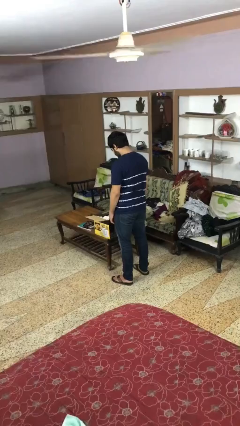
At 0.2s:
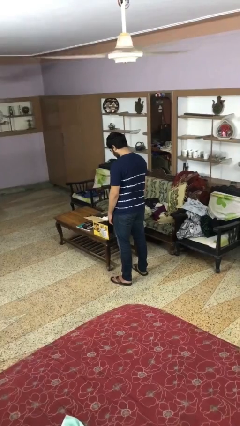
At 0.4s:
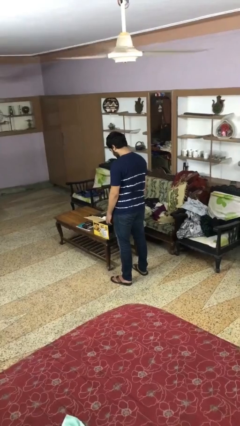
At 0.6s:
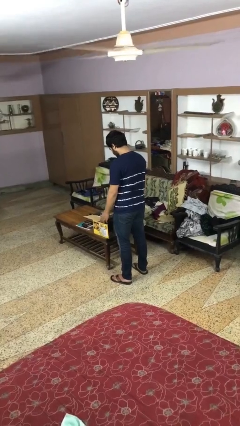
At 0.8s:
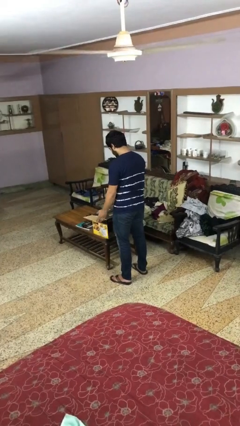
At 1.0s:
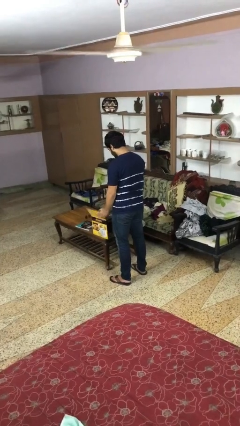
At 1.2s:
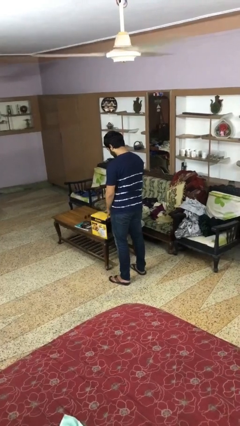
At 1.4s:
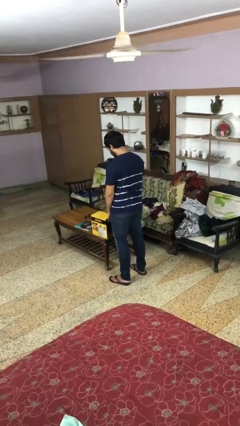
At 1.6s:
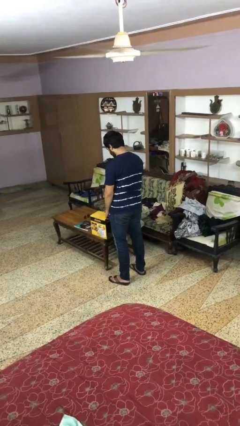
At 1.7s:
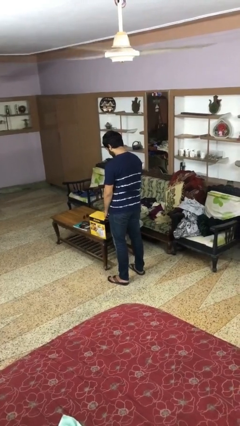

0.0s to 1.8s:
person closes box

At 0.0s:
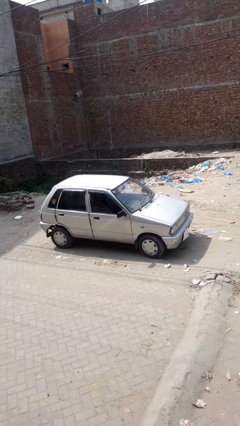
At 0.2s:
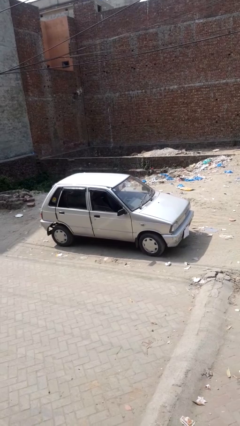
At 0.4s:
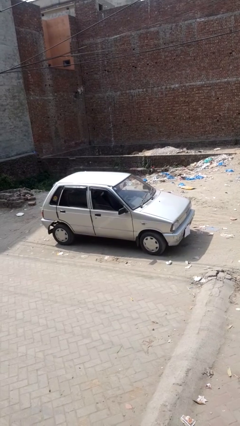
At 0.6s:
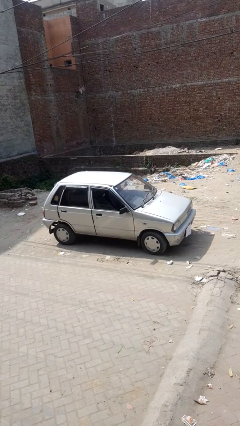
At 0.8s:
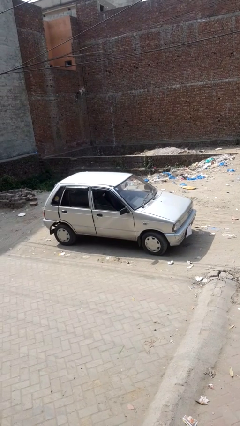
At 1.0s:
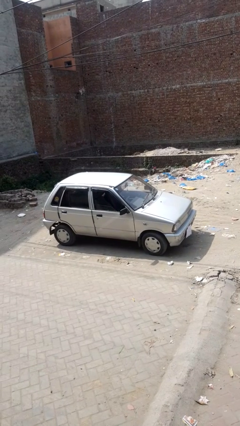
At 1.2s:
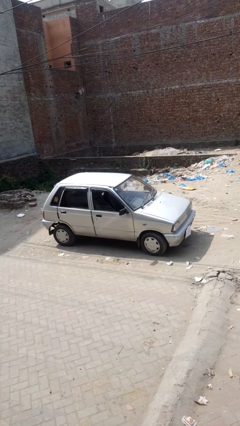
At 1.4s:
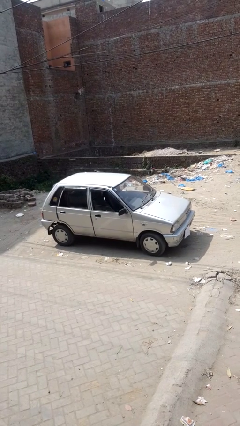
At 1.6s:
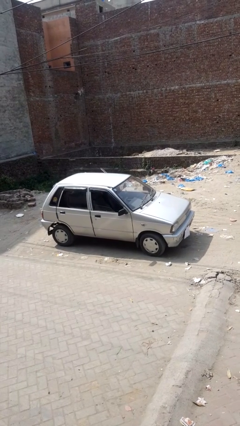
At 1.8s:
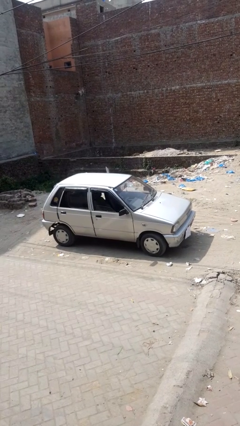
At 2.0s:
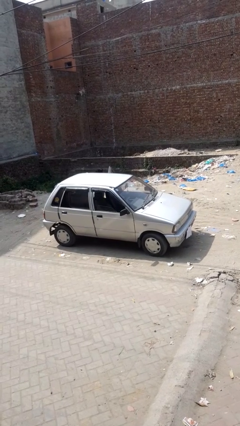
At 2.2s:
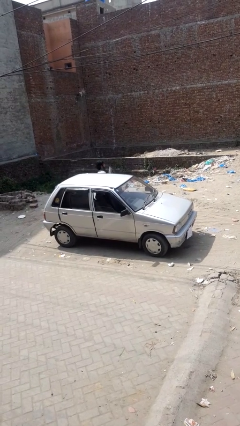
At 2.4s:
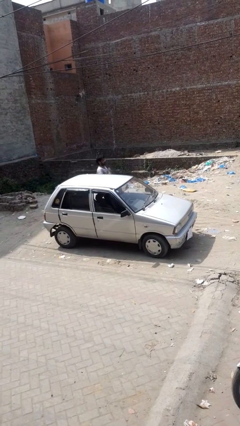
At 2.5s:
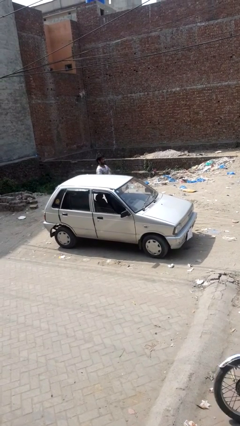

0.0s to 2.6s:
car drops off person

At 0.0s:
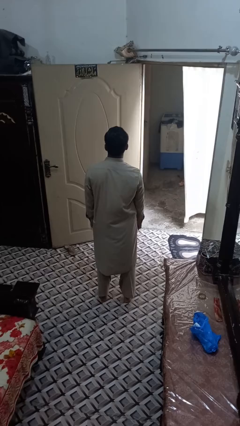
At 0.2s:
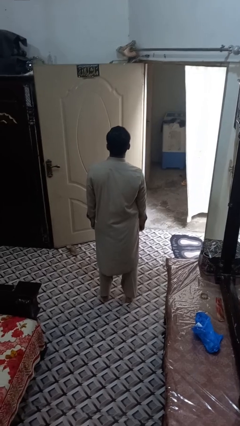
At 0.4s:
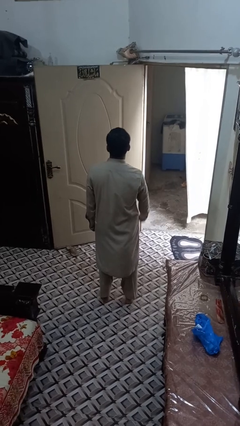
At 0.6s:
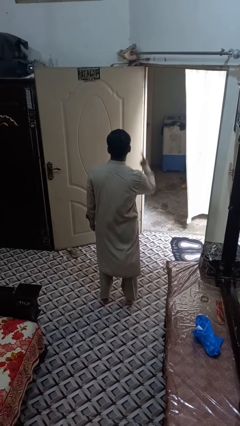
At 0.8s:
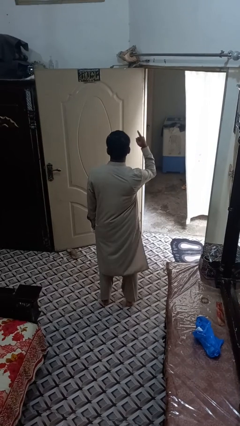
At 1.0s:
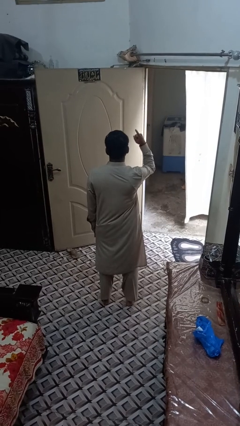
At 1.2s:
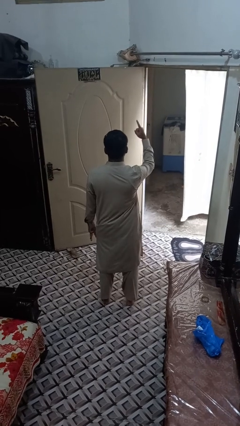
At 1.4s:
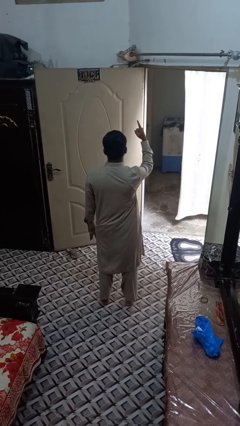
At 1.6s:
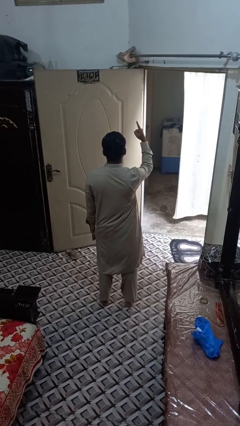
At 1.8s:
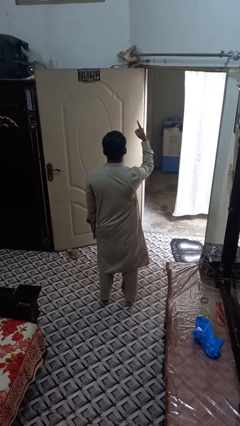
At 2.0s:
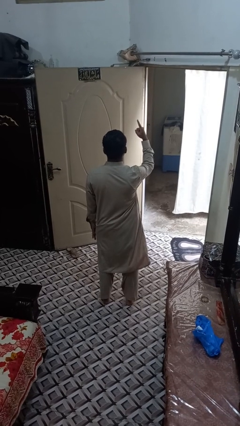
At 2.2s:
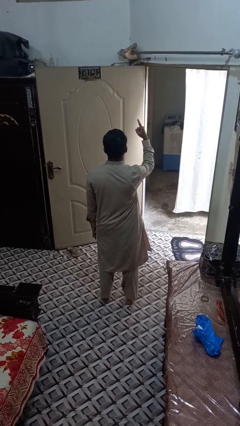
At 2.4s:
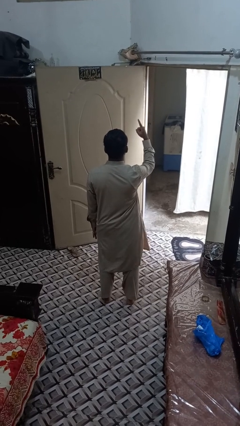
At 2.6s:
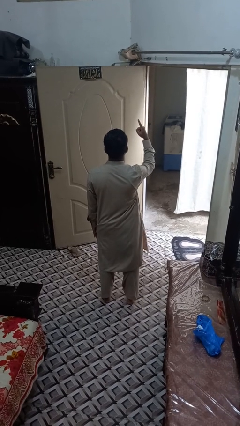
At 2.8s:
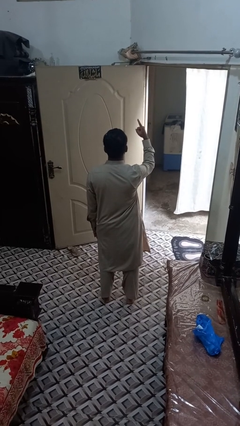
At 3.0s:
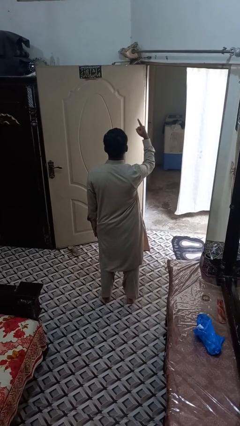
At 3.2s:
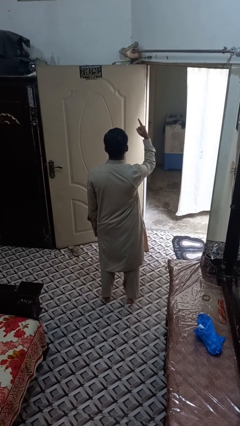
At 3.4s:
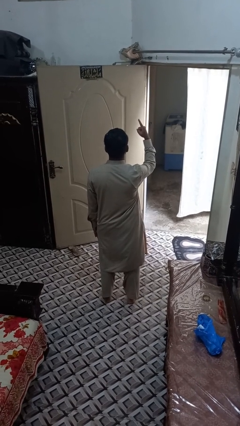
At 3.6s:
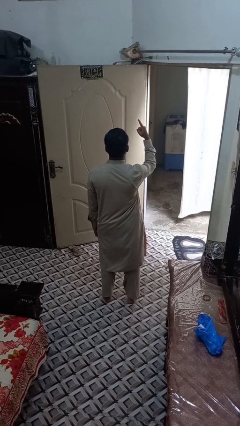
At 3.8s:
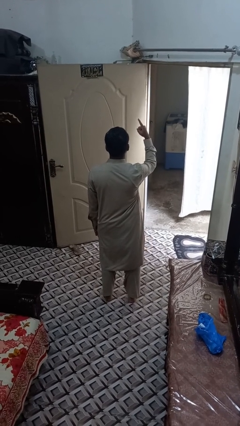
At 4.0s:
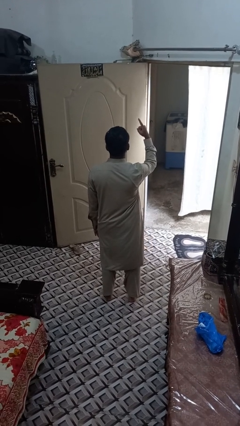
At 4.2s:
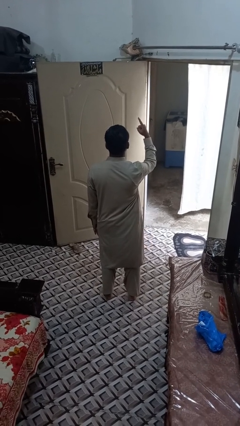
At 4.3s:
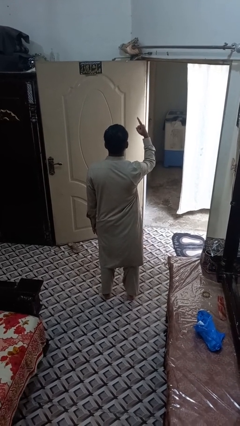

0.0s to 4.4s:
person gestures number one

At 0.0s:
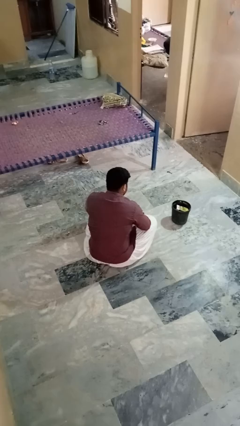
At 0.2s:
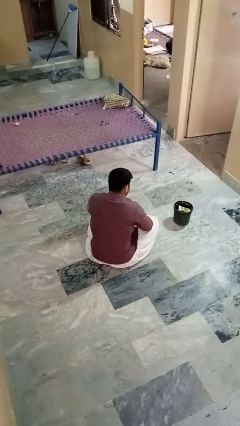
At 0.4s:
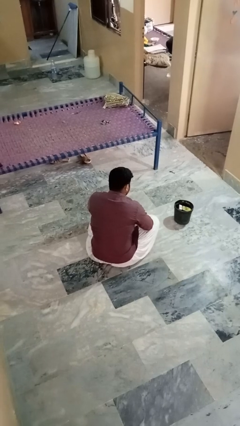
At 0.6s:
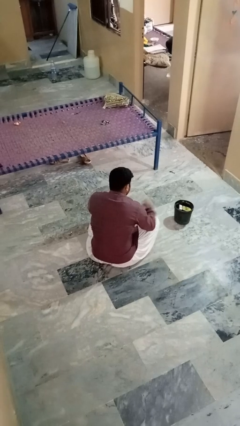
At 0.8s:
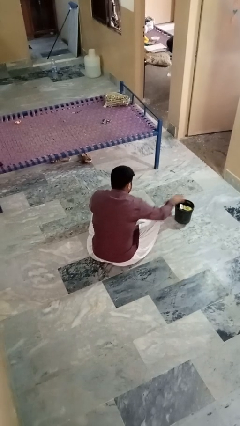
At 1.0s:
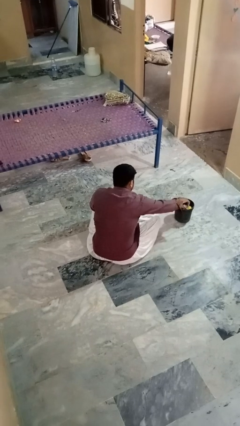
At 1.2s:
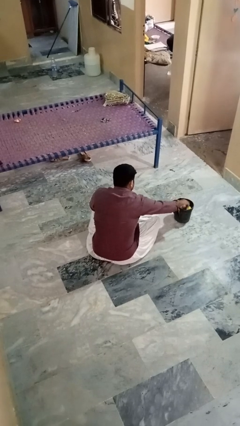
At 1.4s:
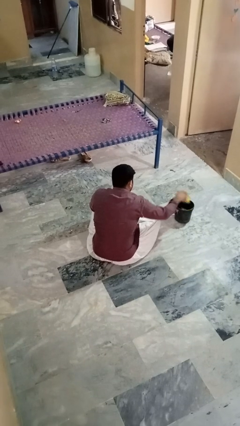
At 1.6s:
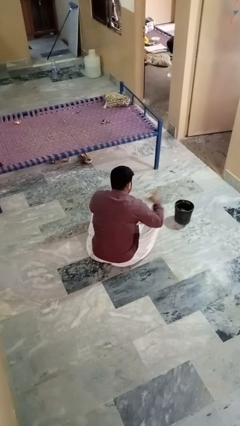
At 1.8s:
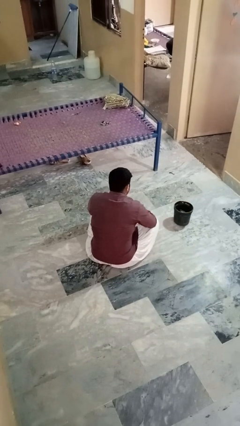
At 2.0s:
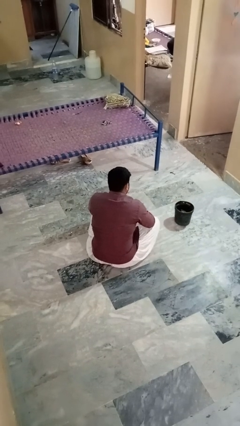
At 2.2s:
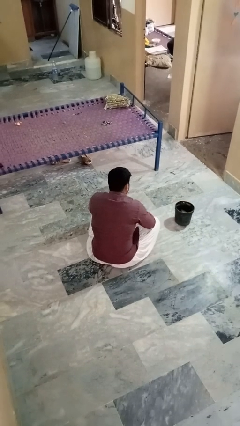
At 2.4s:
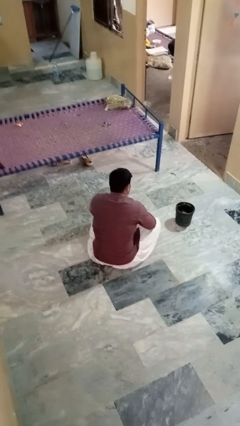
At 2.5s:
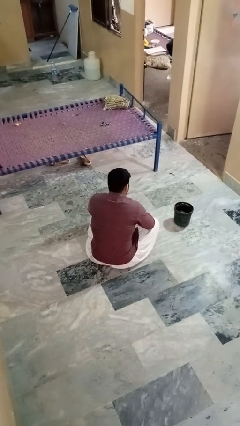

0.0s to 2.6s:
person takes object from basket

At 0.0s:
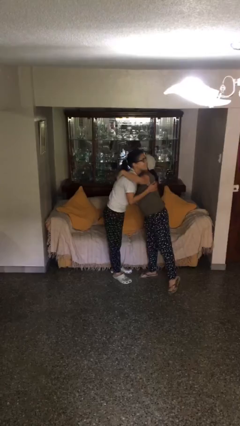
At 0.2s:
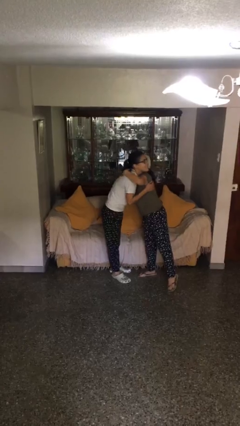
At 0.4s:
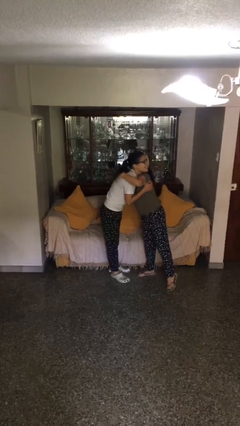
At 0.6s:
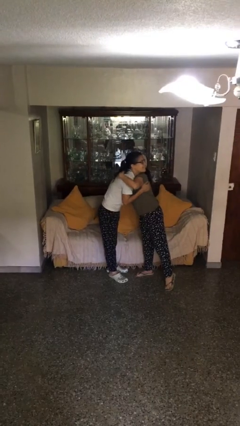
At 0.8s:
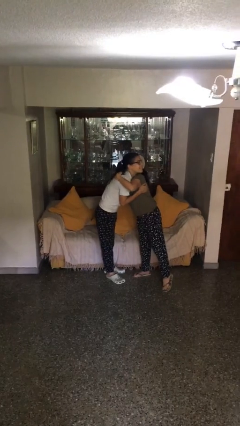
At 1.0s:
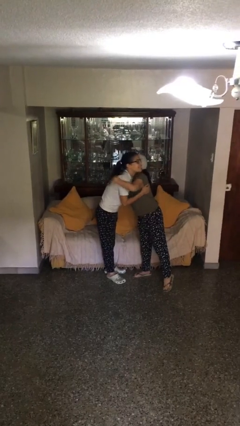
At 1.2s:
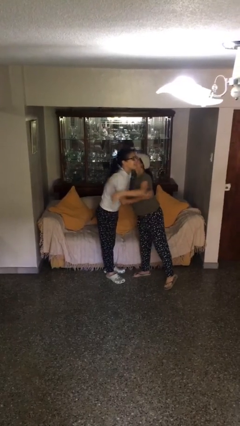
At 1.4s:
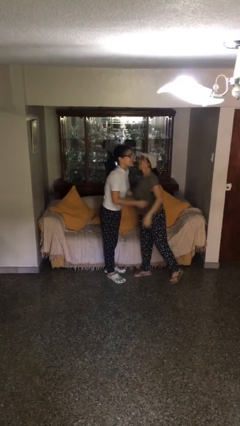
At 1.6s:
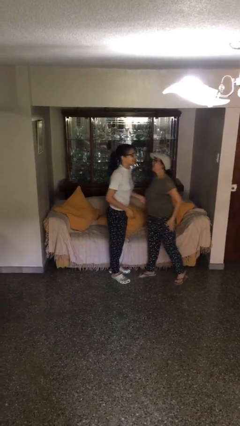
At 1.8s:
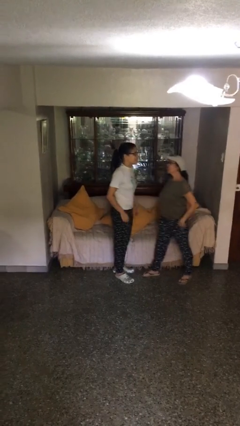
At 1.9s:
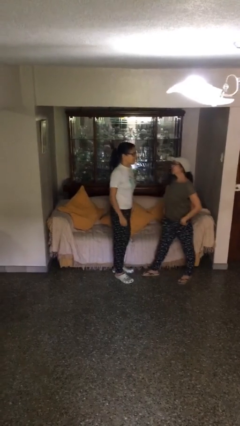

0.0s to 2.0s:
person embraces person

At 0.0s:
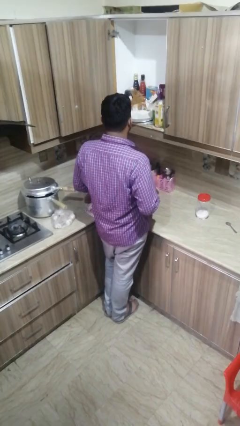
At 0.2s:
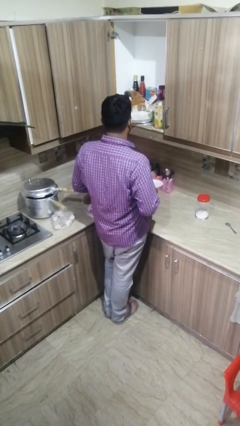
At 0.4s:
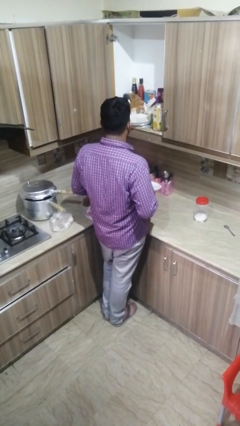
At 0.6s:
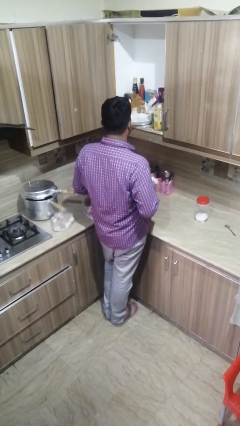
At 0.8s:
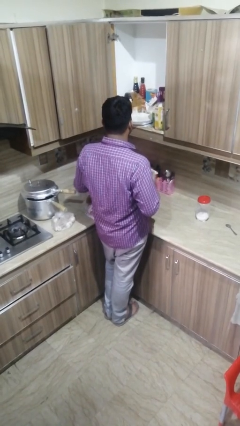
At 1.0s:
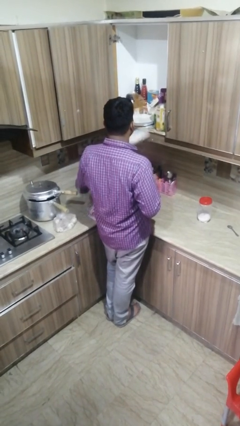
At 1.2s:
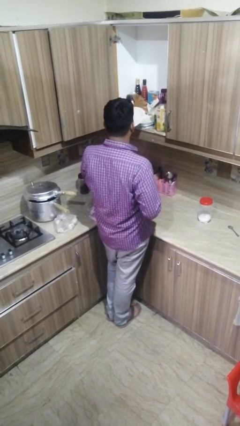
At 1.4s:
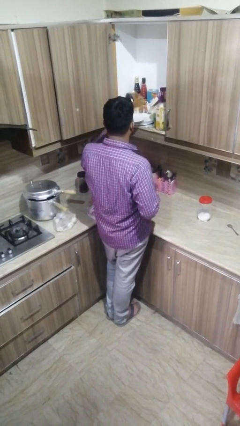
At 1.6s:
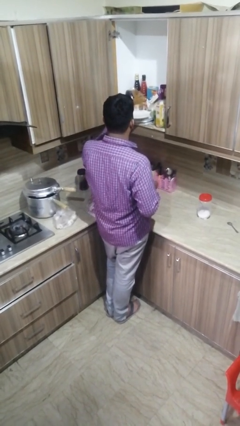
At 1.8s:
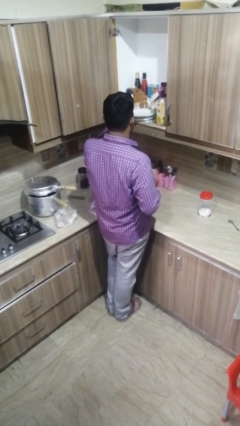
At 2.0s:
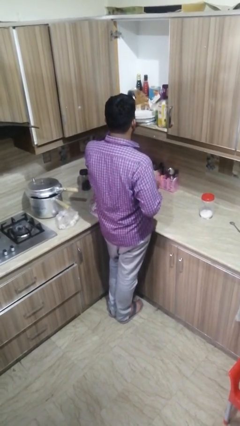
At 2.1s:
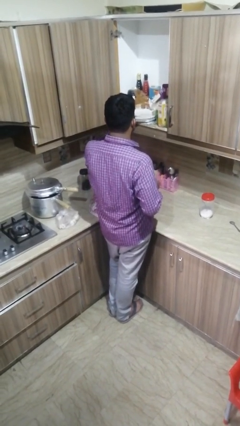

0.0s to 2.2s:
person puts object in cabinet

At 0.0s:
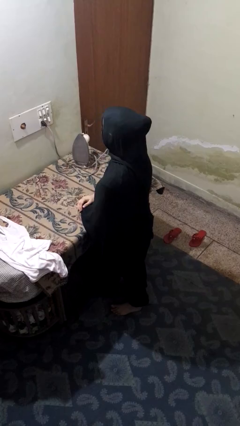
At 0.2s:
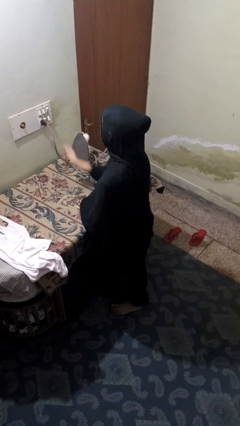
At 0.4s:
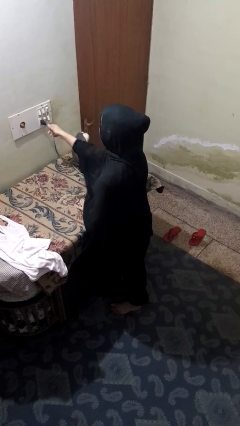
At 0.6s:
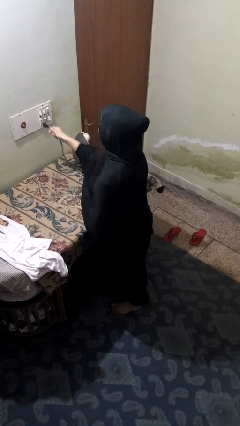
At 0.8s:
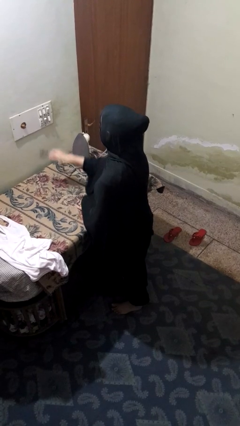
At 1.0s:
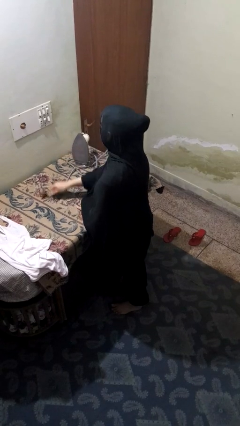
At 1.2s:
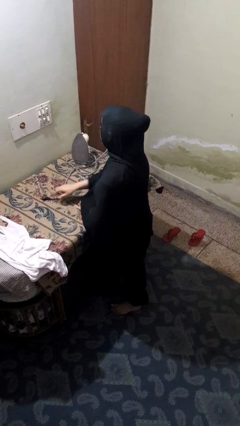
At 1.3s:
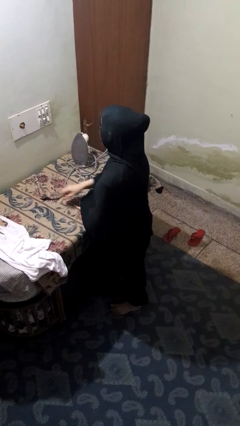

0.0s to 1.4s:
person unplugs from electrical socket
